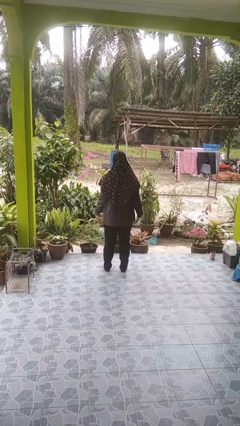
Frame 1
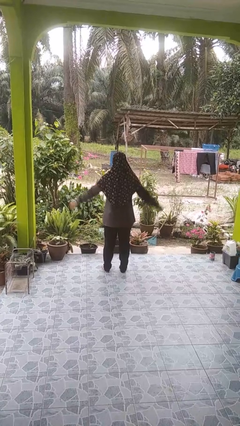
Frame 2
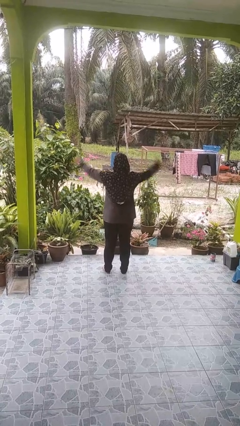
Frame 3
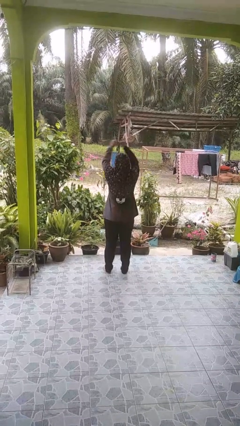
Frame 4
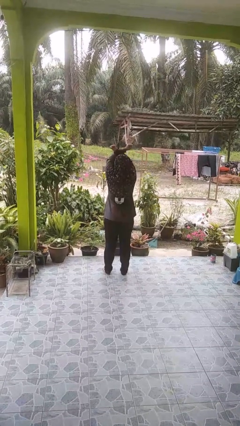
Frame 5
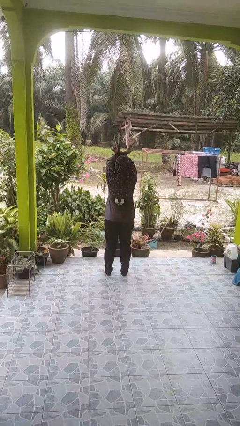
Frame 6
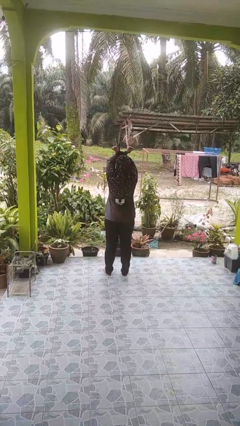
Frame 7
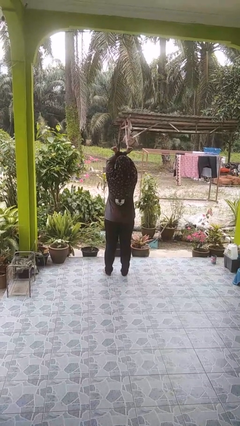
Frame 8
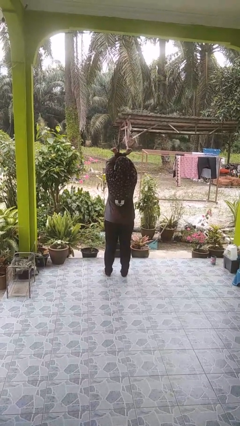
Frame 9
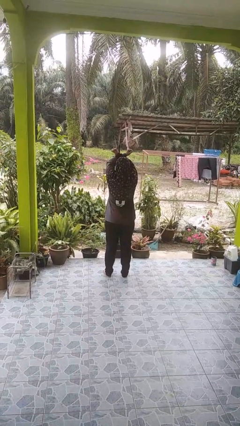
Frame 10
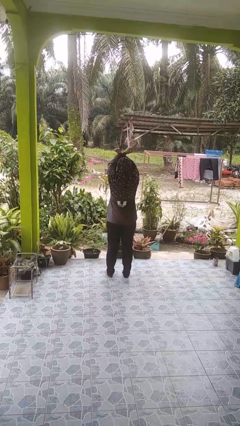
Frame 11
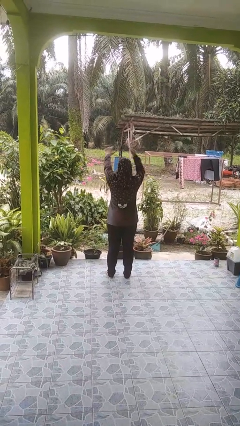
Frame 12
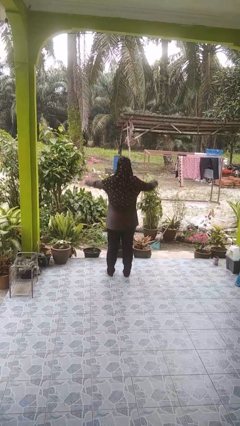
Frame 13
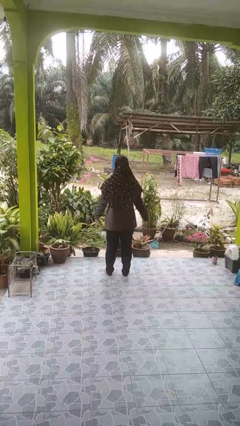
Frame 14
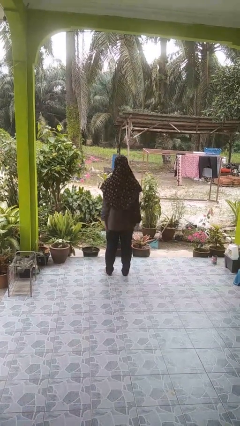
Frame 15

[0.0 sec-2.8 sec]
person crosses arms

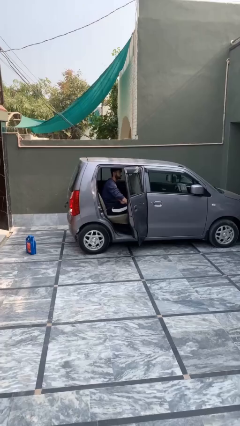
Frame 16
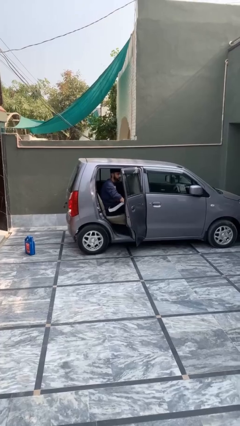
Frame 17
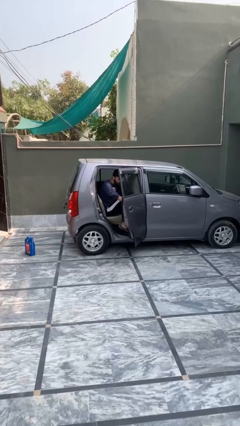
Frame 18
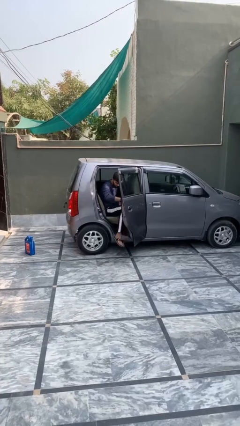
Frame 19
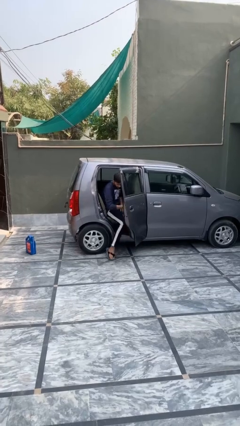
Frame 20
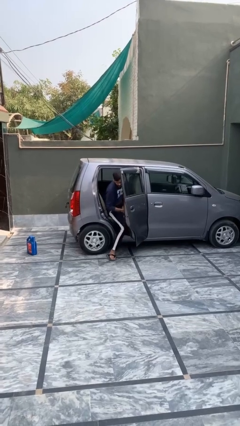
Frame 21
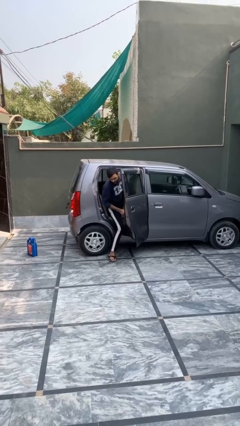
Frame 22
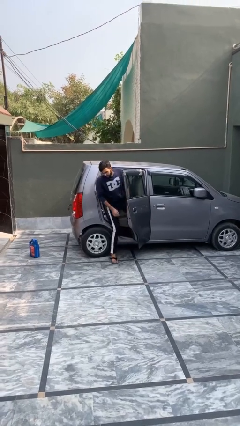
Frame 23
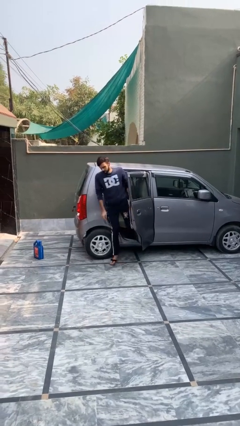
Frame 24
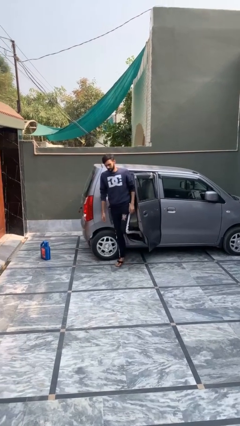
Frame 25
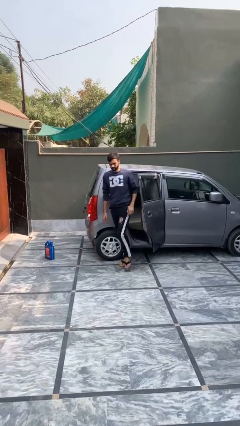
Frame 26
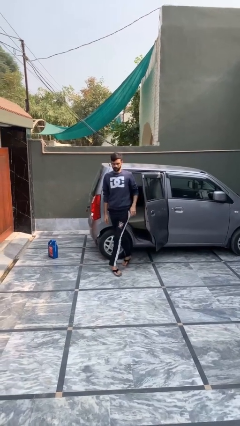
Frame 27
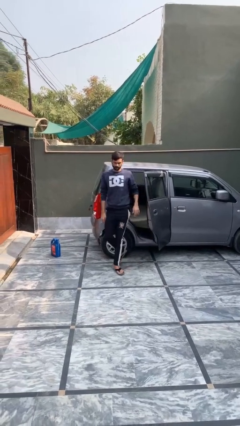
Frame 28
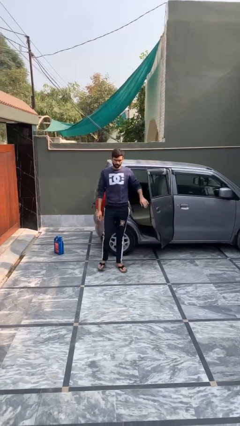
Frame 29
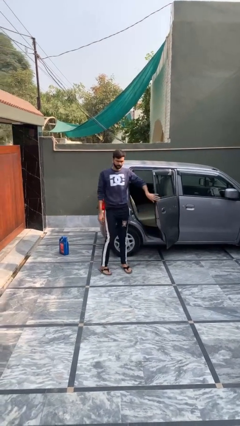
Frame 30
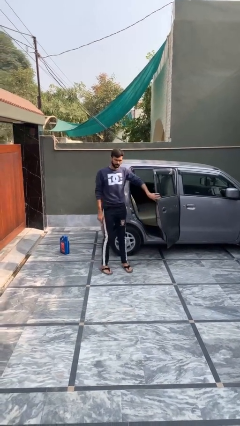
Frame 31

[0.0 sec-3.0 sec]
person exits car

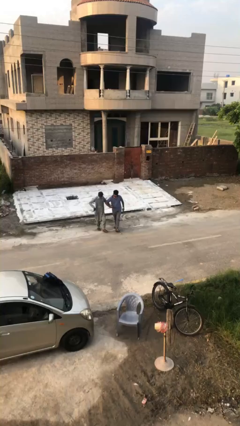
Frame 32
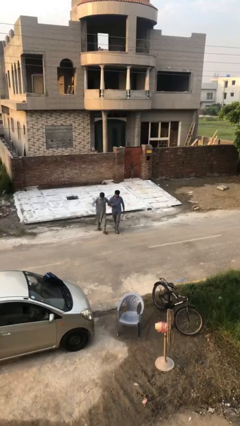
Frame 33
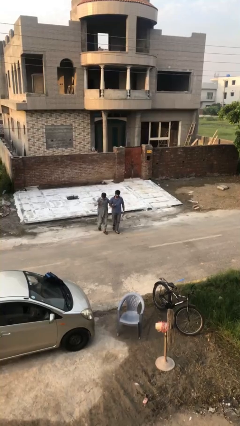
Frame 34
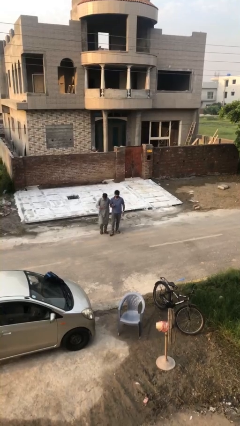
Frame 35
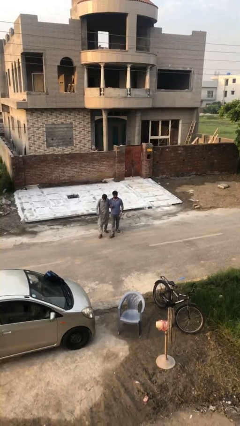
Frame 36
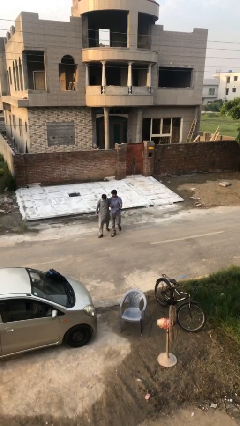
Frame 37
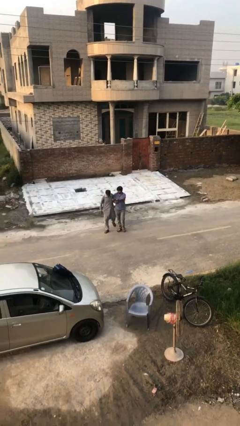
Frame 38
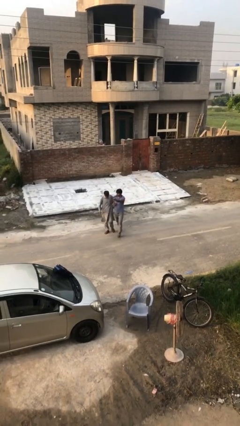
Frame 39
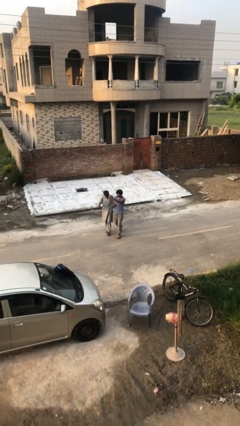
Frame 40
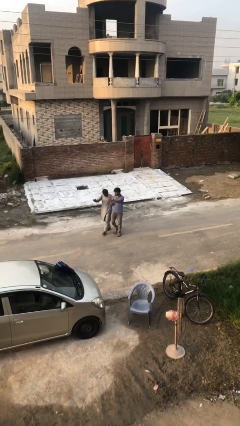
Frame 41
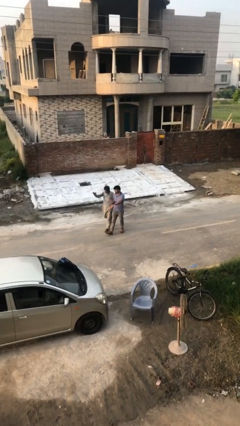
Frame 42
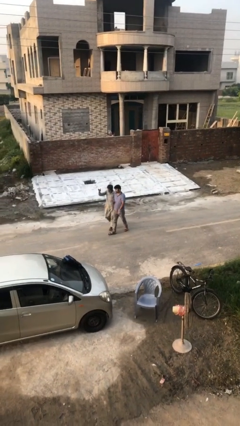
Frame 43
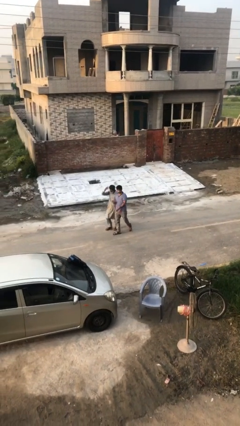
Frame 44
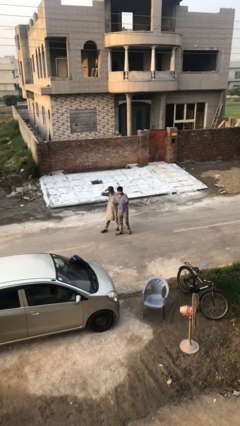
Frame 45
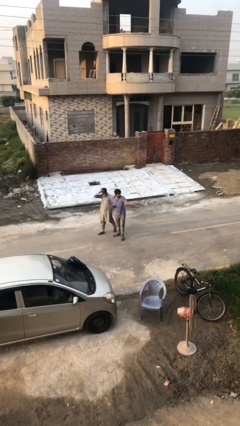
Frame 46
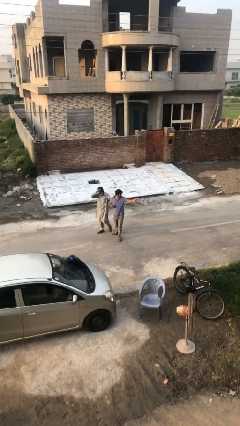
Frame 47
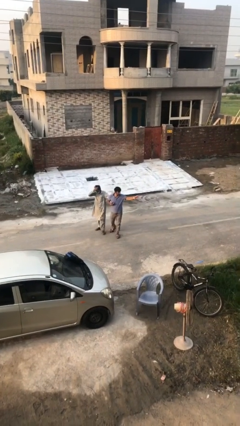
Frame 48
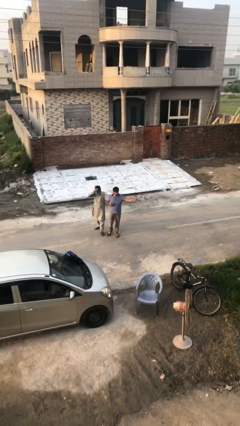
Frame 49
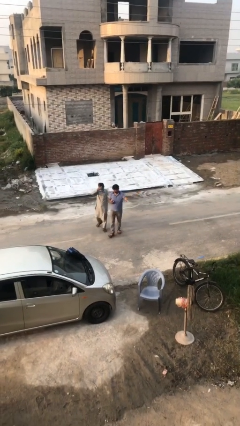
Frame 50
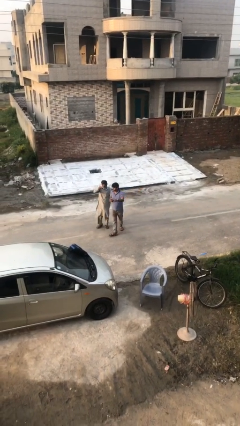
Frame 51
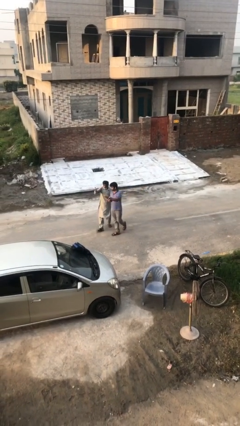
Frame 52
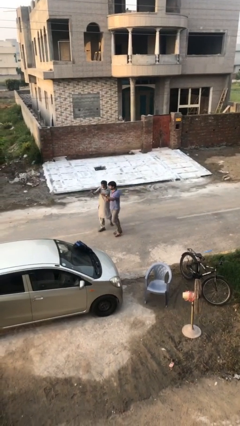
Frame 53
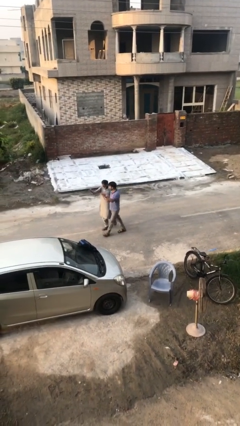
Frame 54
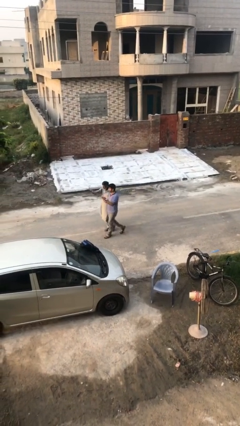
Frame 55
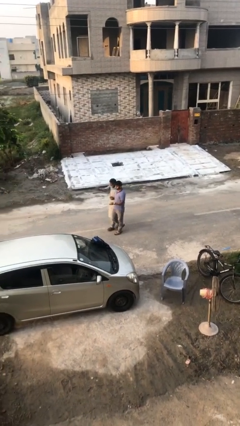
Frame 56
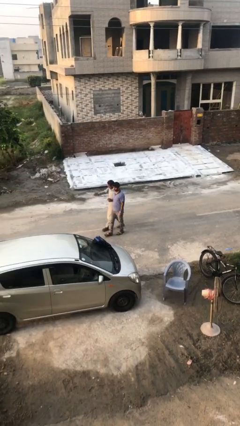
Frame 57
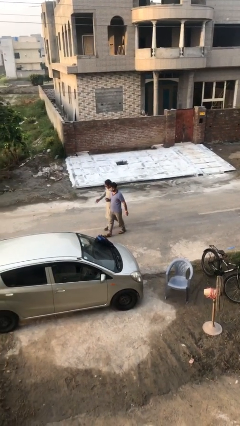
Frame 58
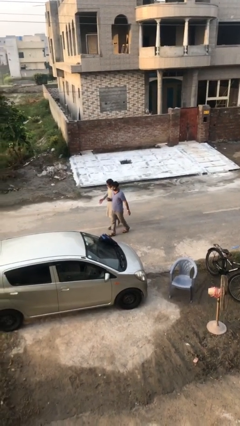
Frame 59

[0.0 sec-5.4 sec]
person holds hand

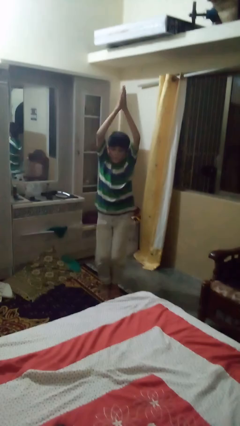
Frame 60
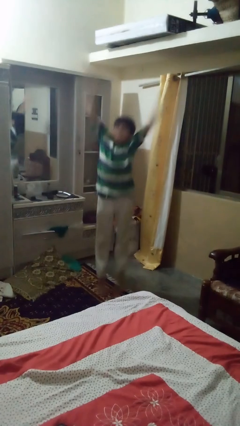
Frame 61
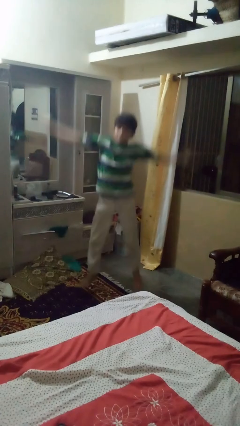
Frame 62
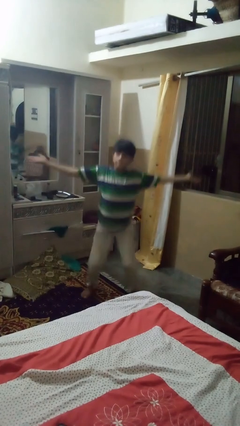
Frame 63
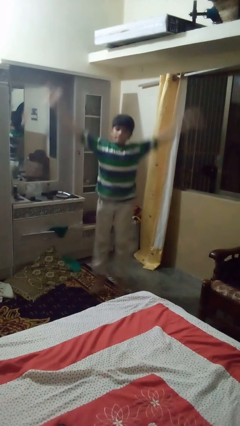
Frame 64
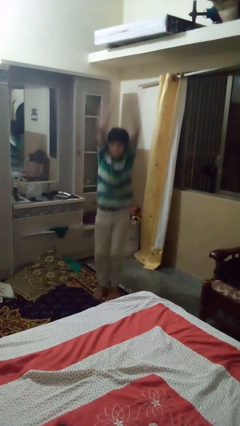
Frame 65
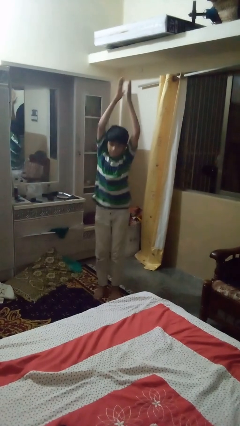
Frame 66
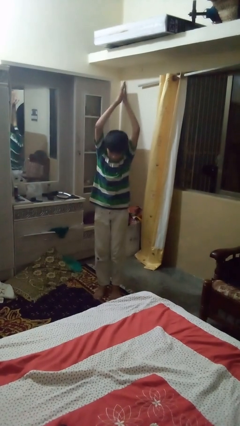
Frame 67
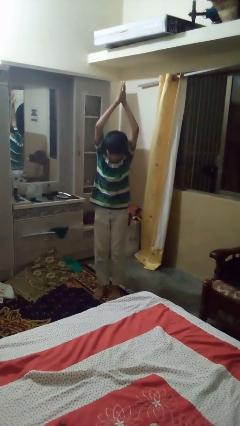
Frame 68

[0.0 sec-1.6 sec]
person exercises with jumping jacks

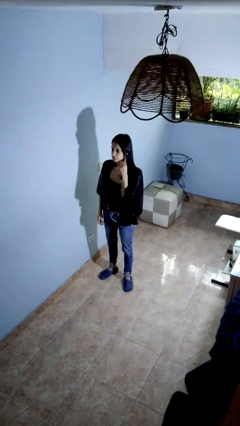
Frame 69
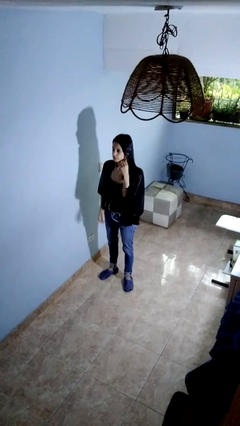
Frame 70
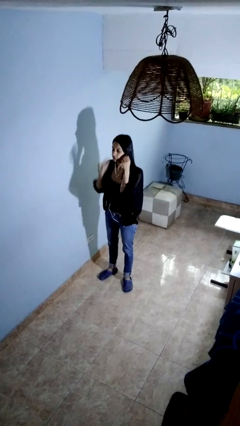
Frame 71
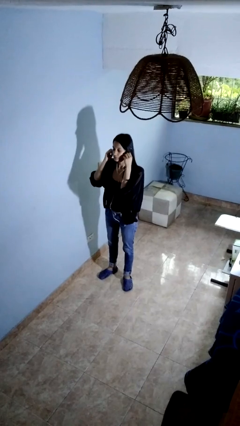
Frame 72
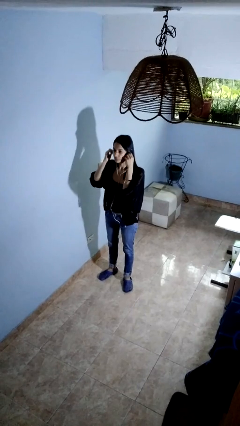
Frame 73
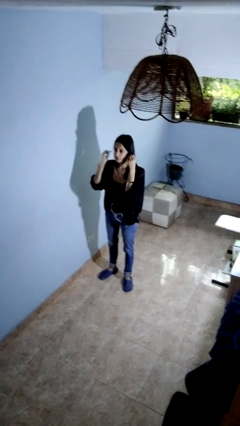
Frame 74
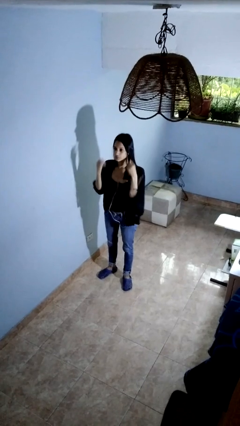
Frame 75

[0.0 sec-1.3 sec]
person takes off headphones

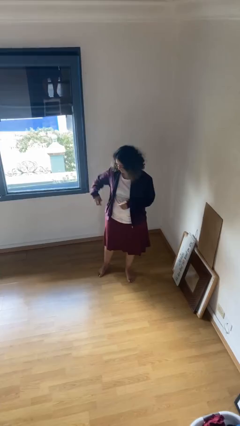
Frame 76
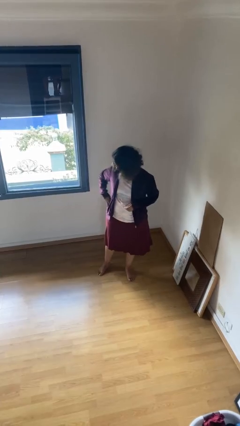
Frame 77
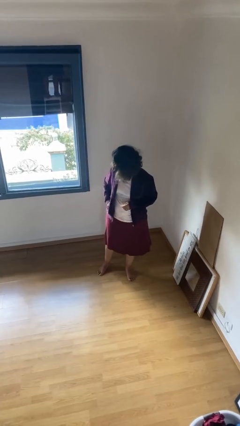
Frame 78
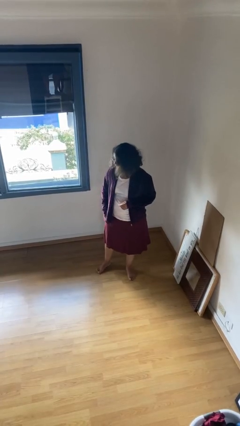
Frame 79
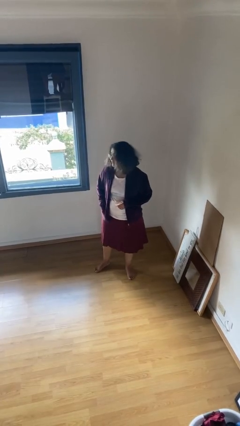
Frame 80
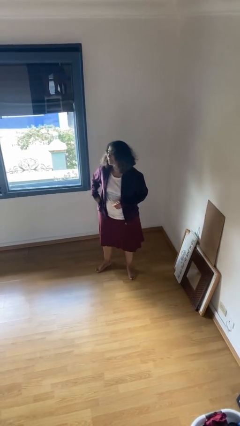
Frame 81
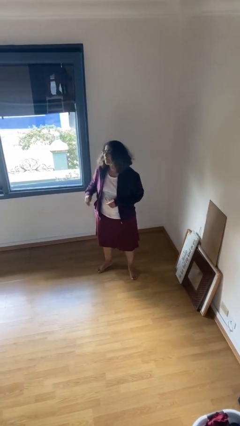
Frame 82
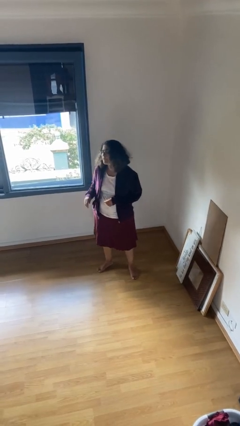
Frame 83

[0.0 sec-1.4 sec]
person puts phone into pocket

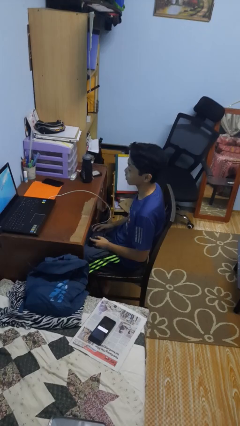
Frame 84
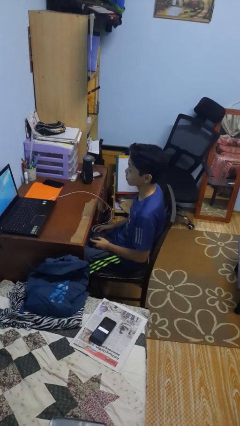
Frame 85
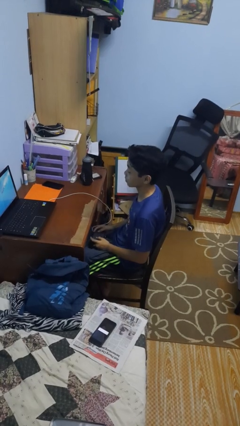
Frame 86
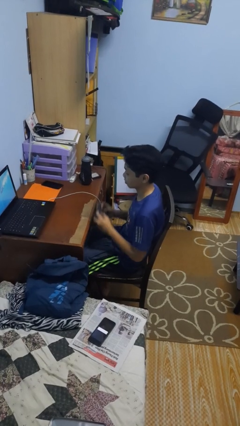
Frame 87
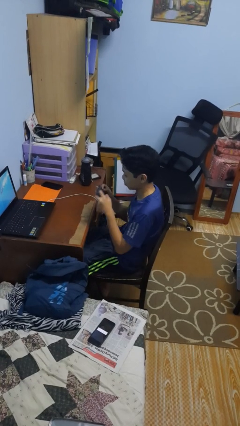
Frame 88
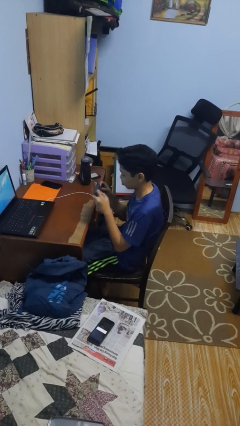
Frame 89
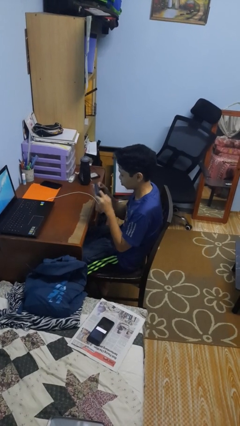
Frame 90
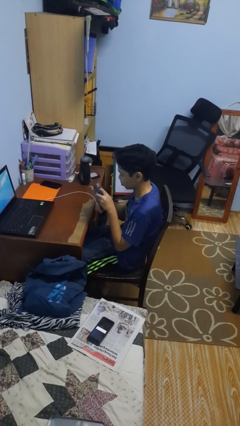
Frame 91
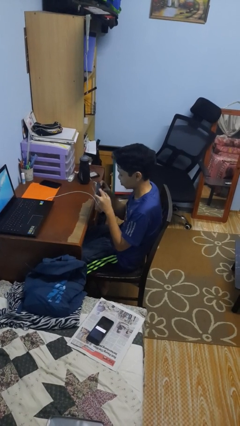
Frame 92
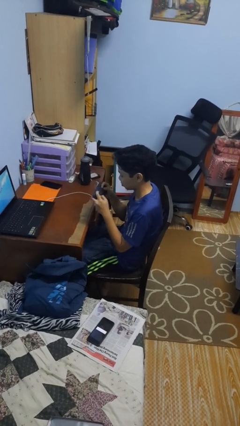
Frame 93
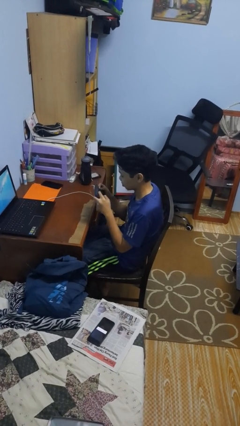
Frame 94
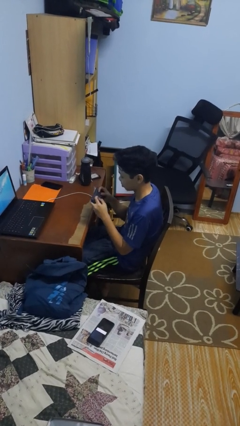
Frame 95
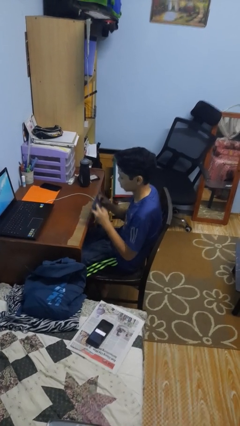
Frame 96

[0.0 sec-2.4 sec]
person interacts with handheld game
